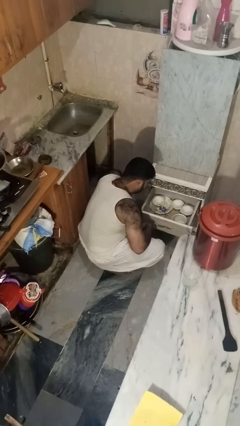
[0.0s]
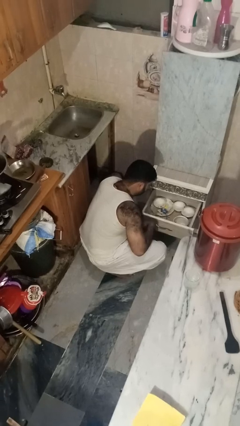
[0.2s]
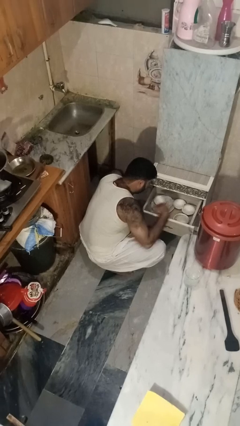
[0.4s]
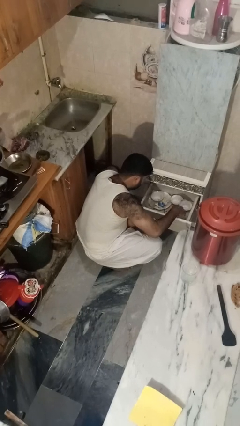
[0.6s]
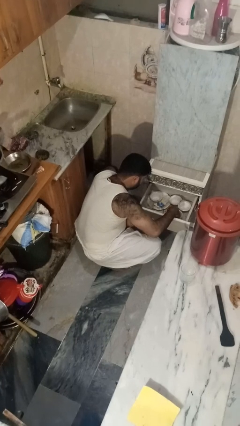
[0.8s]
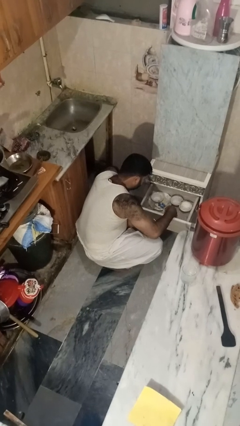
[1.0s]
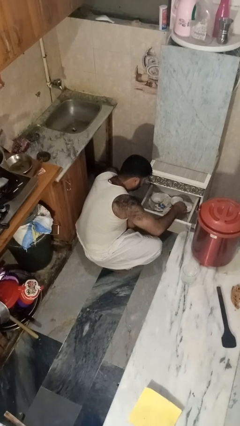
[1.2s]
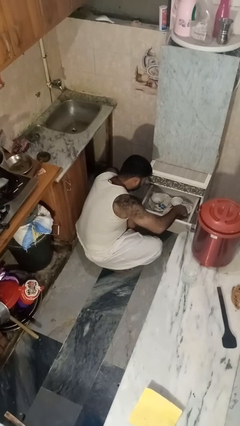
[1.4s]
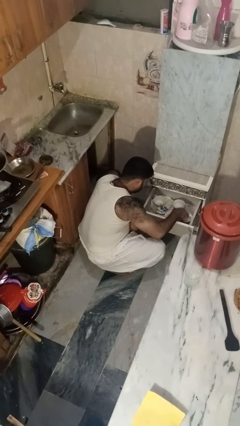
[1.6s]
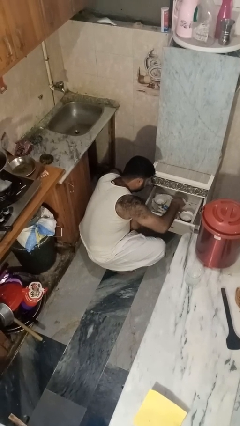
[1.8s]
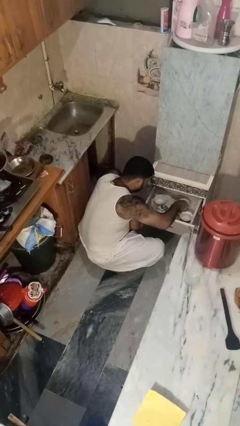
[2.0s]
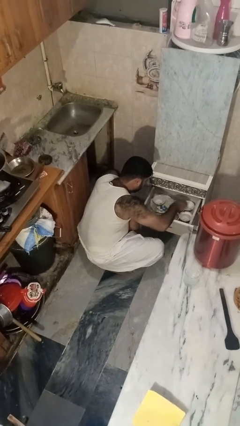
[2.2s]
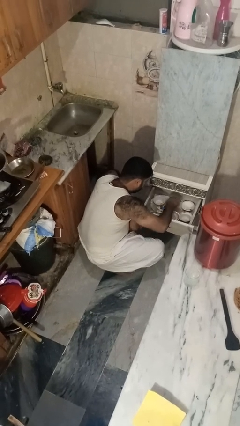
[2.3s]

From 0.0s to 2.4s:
person searches in kitchen drawer

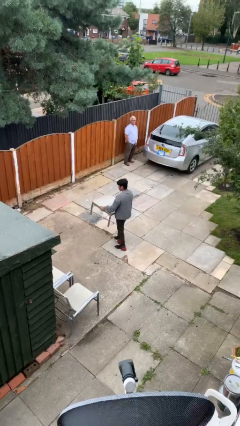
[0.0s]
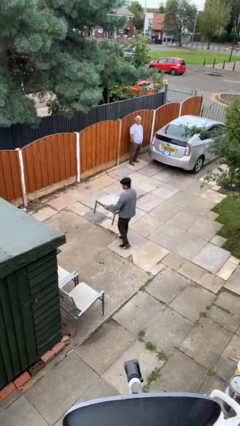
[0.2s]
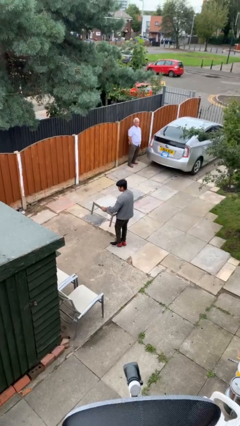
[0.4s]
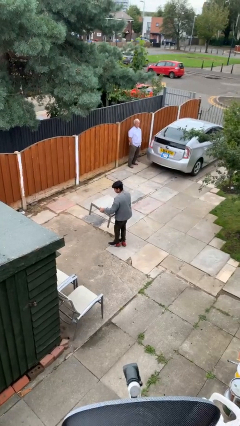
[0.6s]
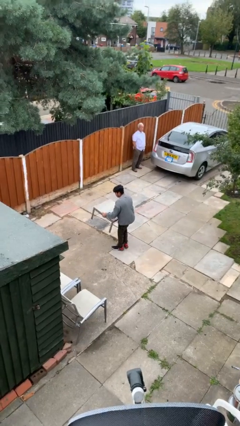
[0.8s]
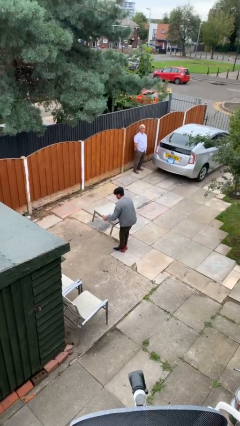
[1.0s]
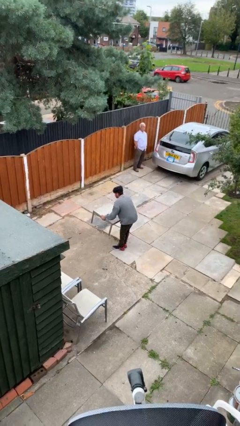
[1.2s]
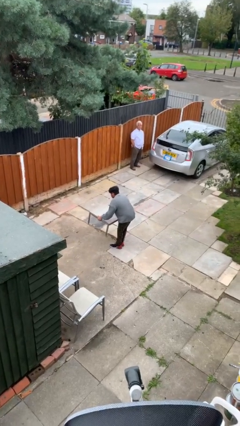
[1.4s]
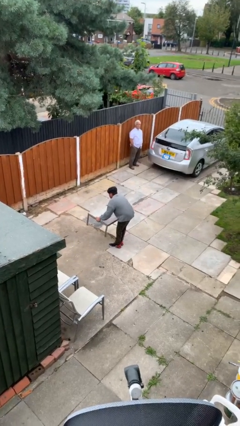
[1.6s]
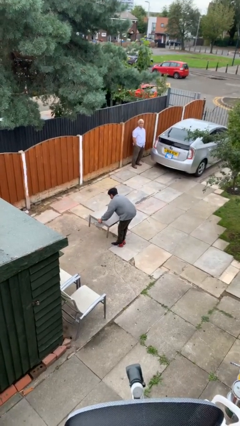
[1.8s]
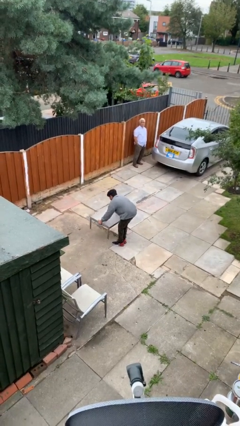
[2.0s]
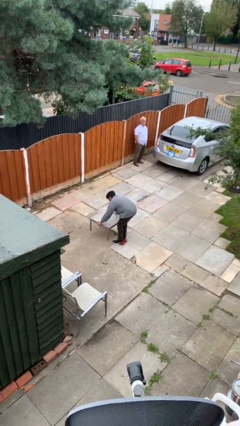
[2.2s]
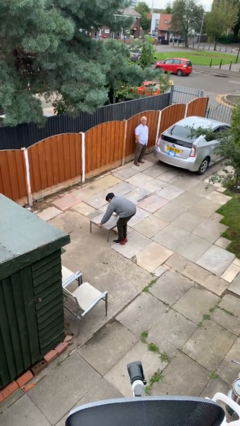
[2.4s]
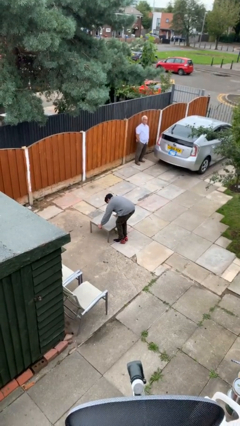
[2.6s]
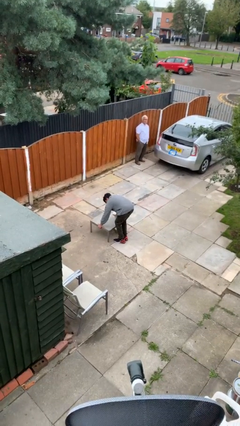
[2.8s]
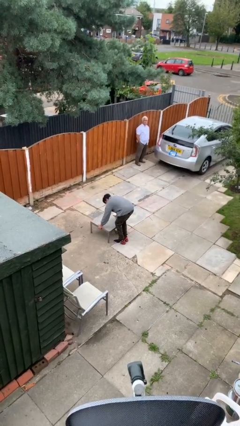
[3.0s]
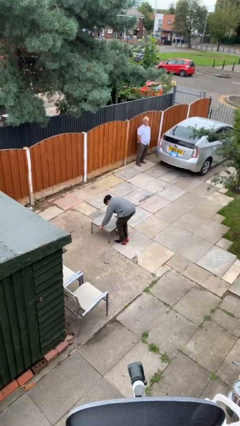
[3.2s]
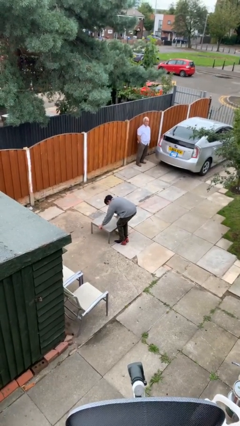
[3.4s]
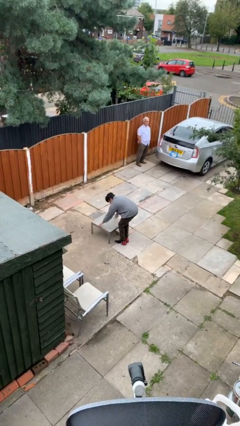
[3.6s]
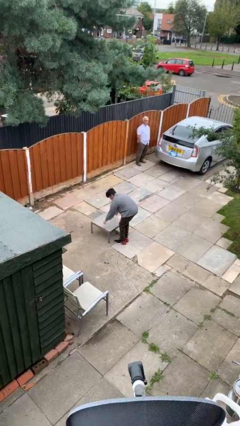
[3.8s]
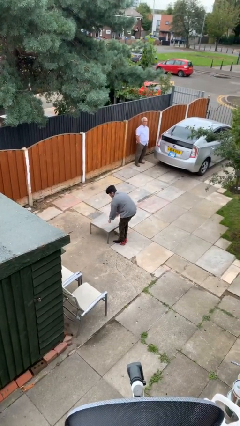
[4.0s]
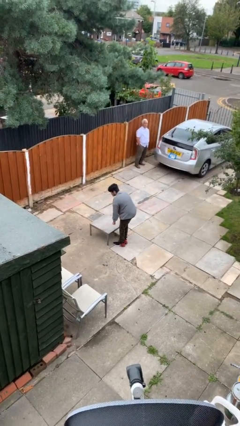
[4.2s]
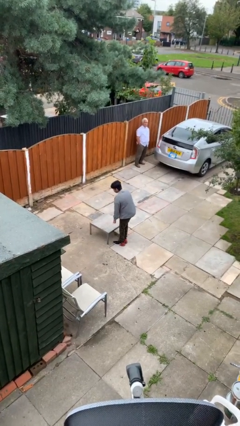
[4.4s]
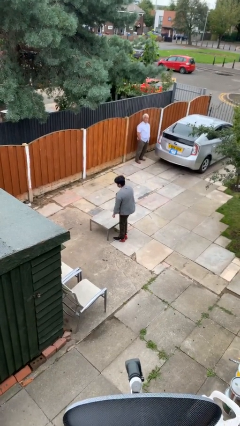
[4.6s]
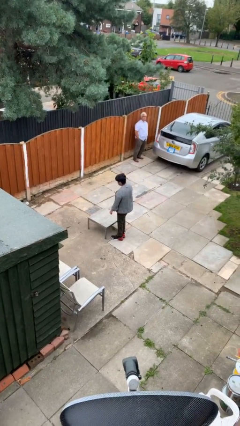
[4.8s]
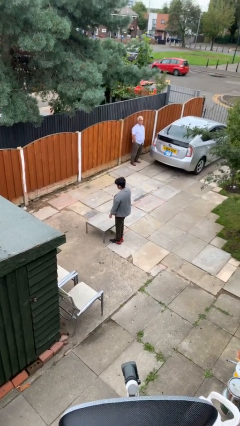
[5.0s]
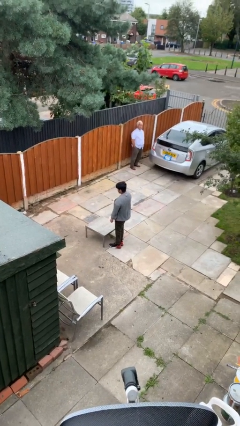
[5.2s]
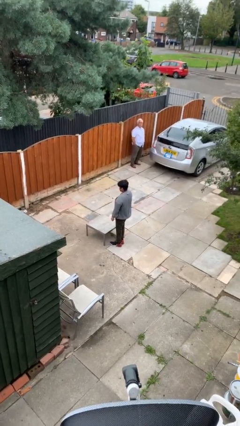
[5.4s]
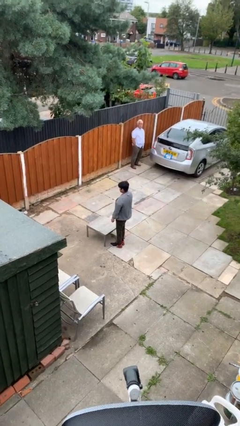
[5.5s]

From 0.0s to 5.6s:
person puts down object on floor

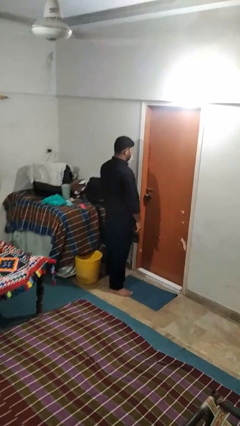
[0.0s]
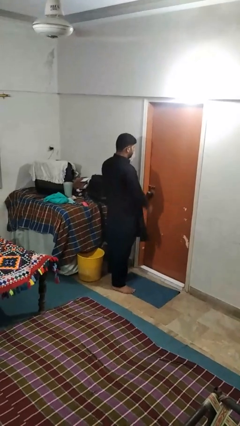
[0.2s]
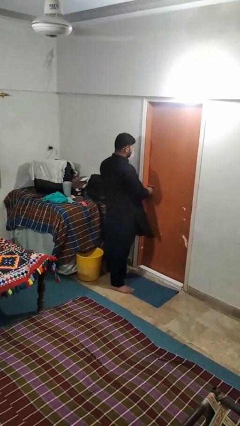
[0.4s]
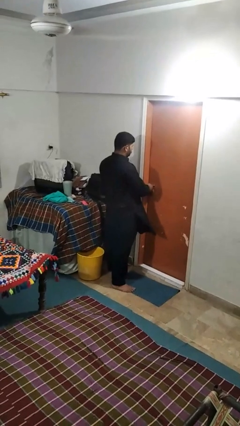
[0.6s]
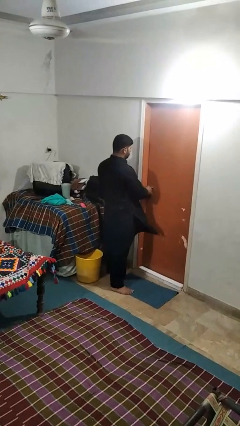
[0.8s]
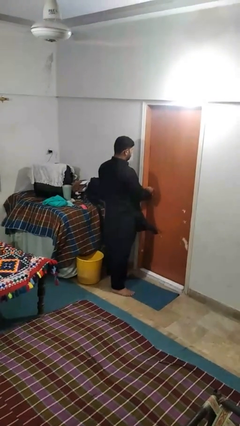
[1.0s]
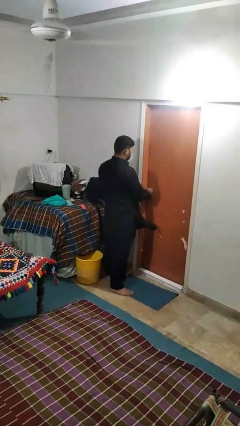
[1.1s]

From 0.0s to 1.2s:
person unlocks door with keys

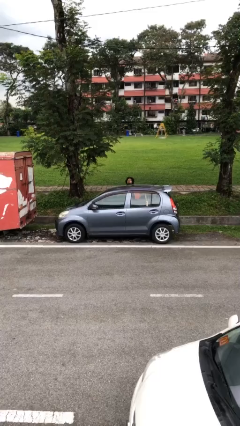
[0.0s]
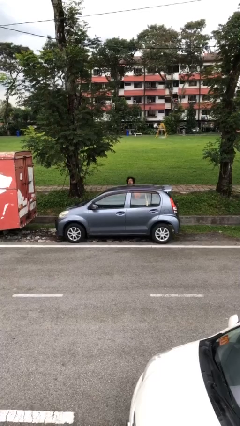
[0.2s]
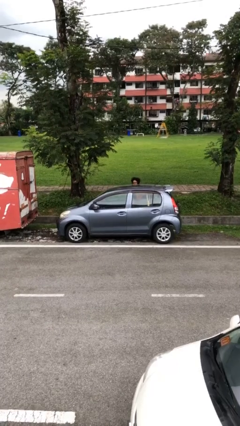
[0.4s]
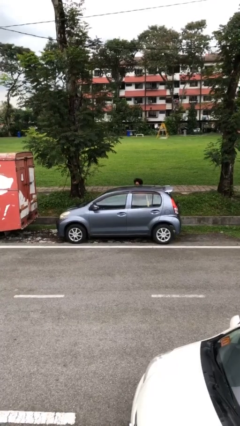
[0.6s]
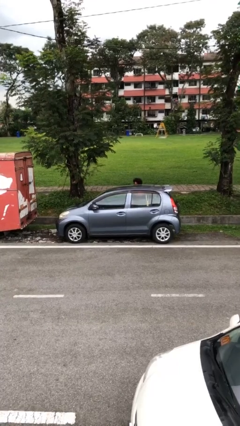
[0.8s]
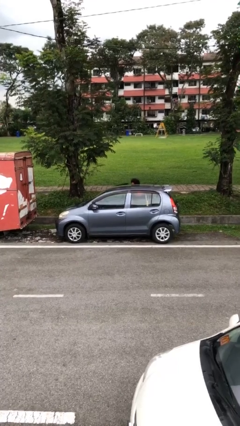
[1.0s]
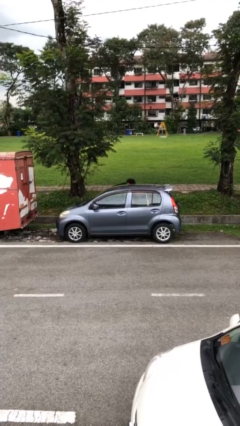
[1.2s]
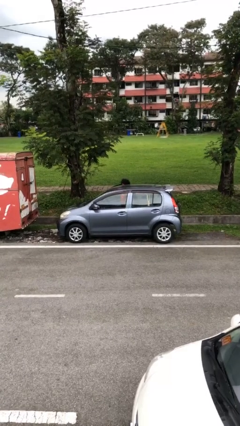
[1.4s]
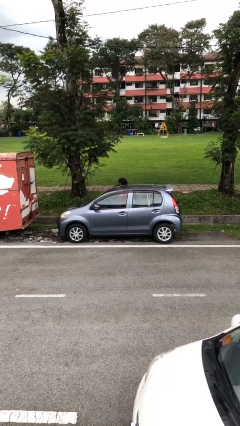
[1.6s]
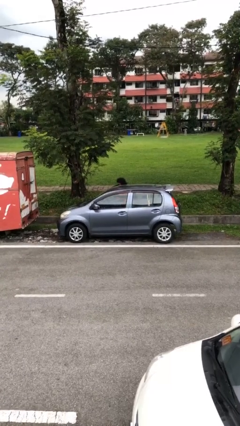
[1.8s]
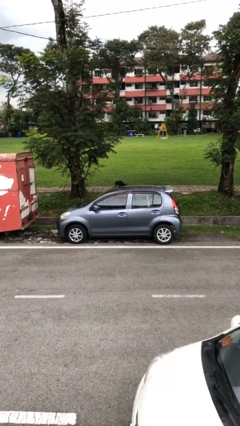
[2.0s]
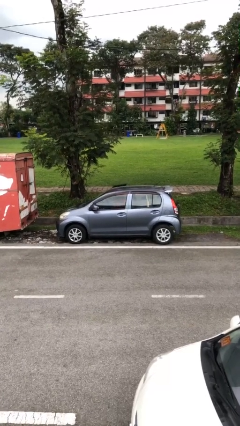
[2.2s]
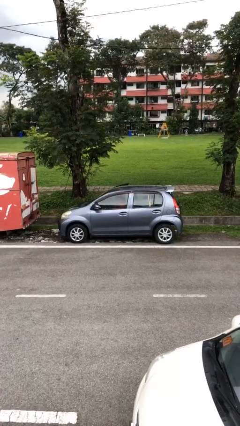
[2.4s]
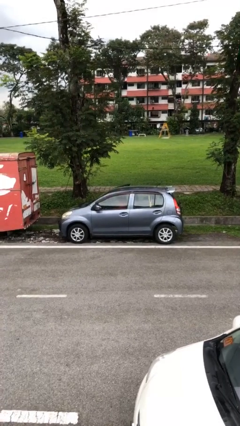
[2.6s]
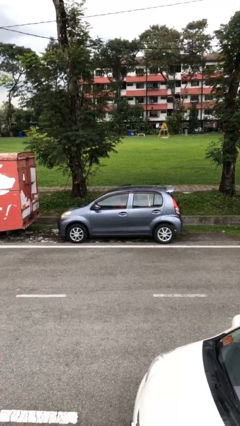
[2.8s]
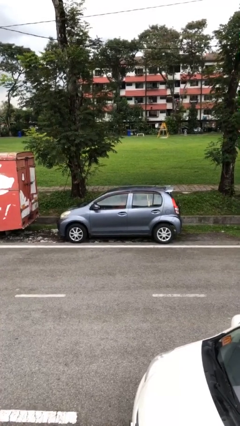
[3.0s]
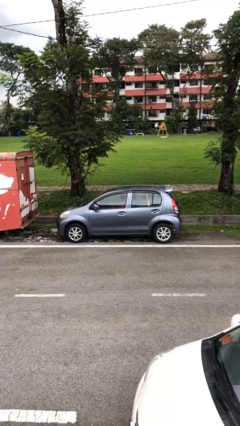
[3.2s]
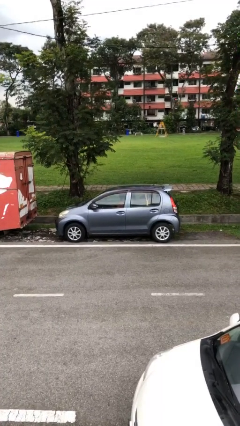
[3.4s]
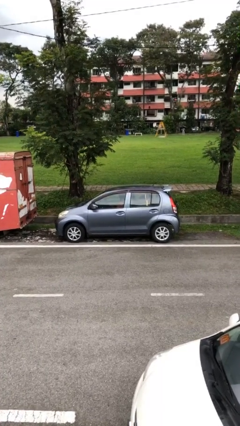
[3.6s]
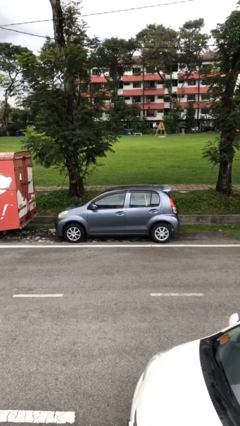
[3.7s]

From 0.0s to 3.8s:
car picks up person

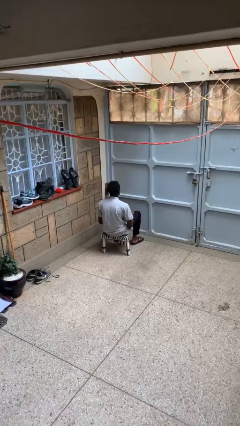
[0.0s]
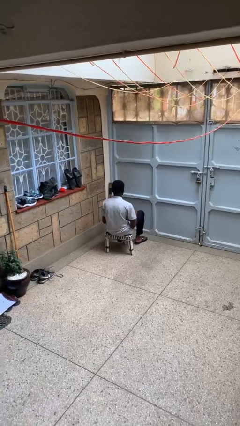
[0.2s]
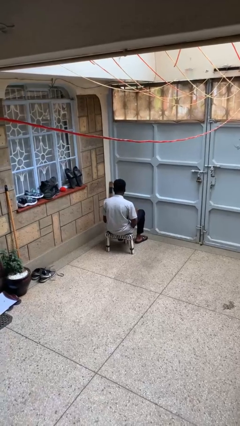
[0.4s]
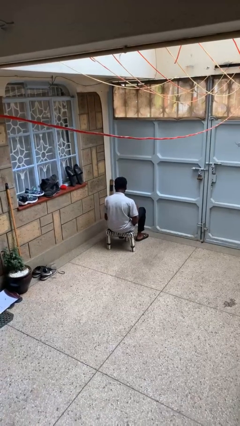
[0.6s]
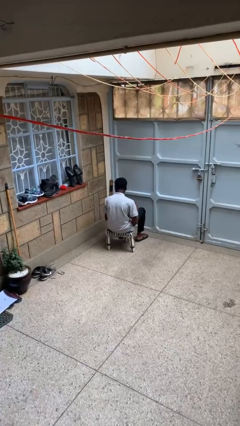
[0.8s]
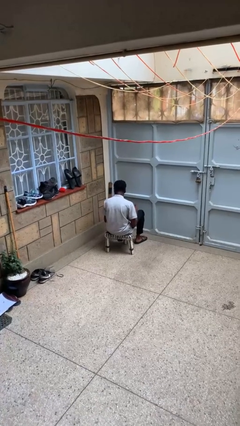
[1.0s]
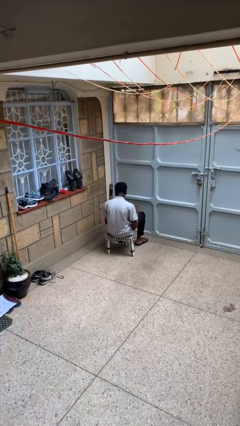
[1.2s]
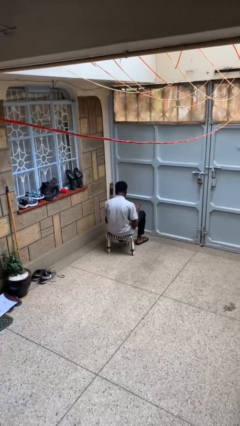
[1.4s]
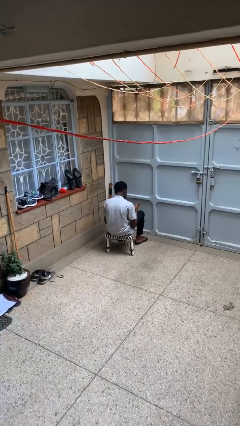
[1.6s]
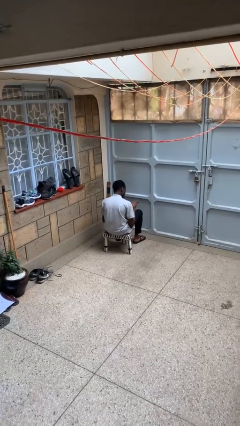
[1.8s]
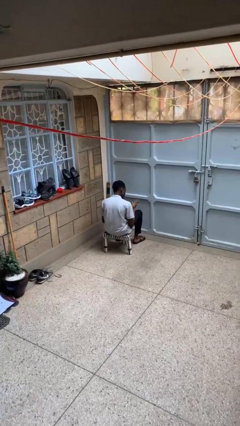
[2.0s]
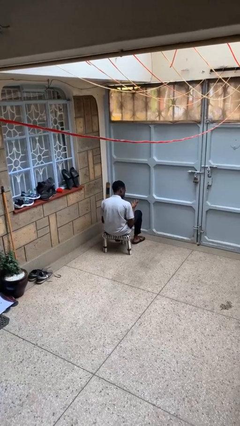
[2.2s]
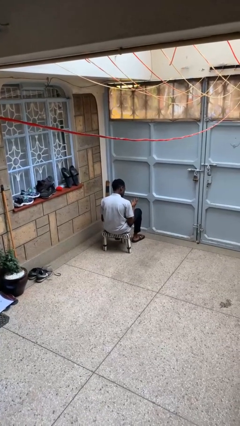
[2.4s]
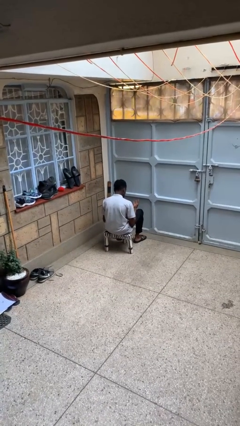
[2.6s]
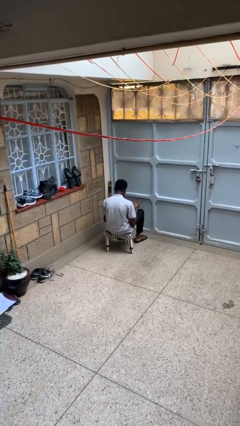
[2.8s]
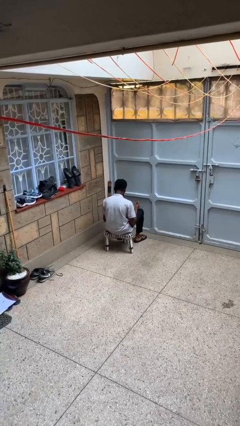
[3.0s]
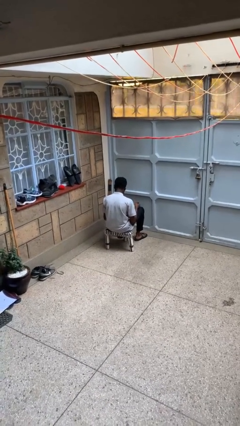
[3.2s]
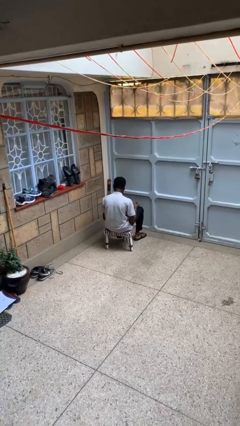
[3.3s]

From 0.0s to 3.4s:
person looks at hands in lap

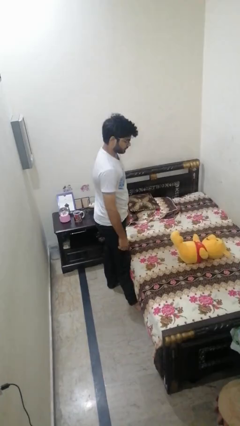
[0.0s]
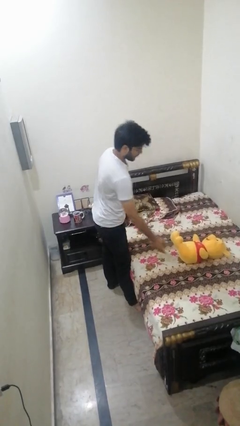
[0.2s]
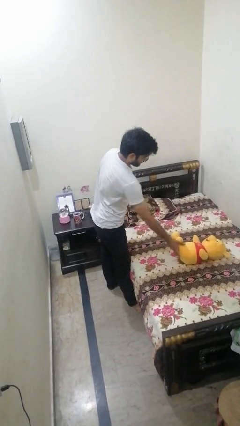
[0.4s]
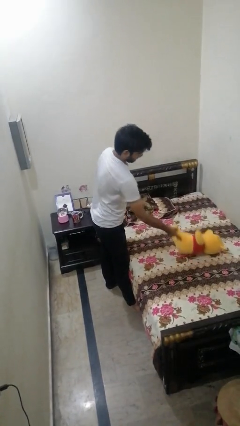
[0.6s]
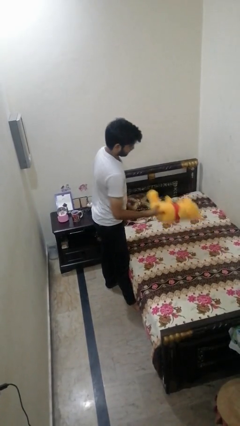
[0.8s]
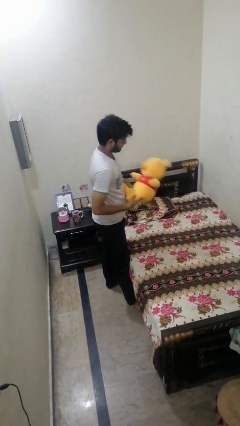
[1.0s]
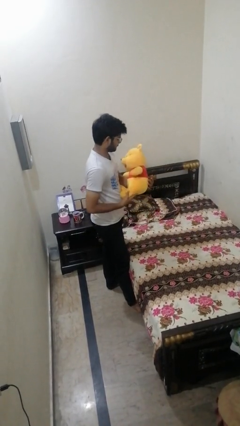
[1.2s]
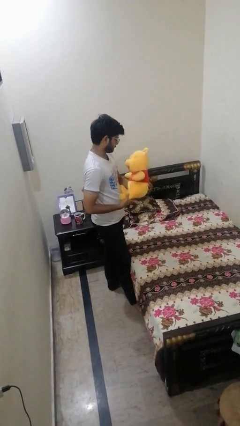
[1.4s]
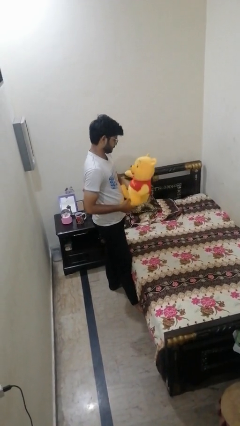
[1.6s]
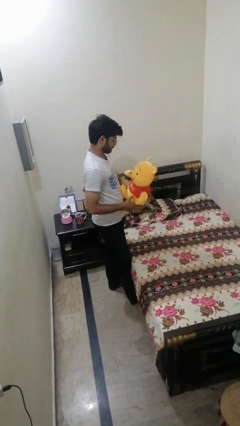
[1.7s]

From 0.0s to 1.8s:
person picks up object from bed
